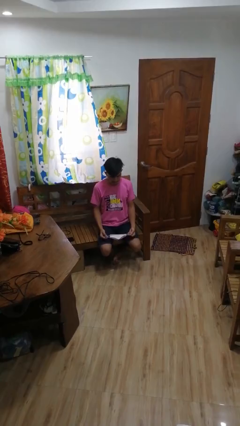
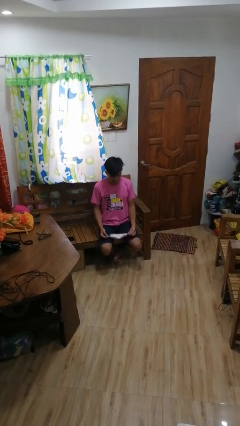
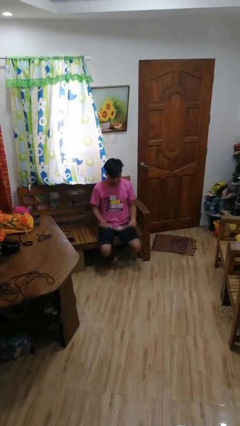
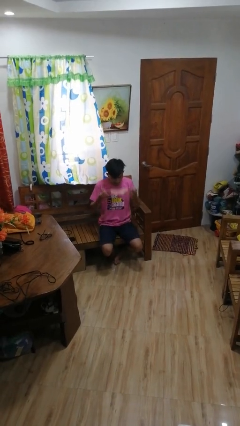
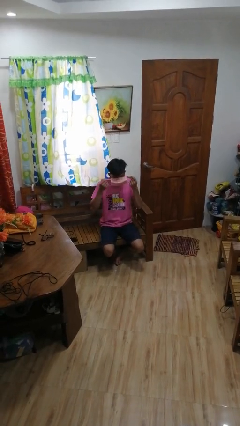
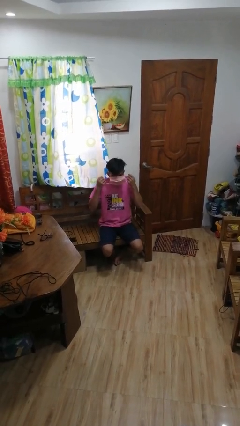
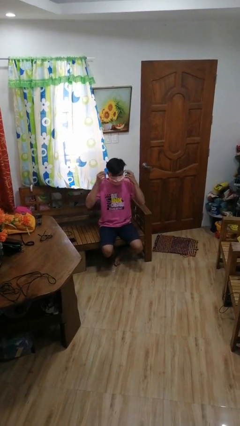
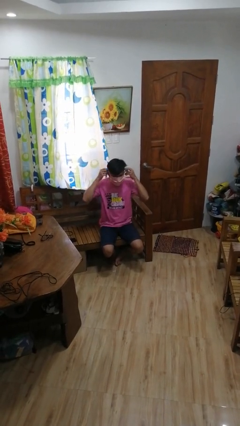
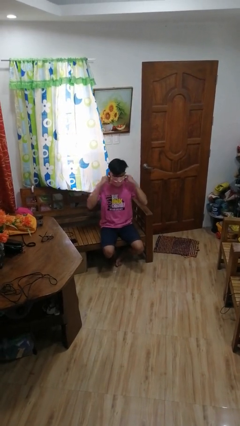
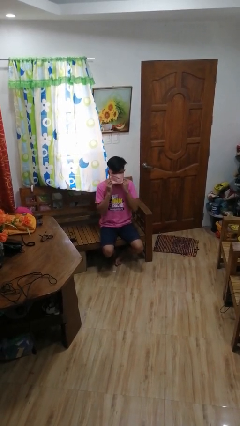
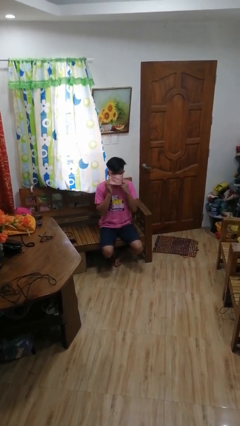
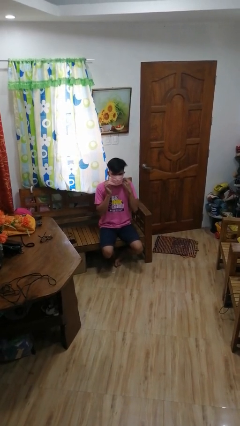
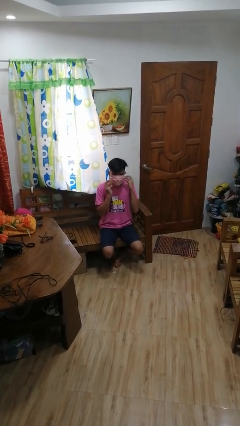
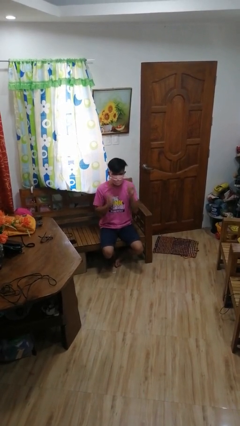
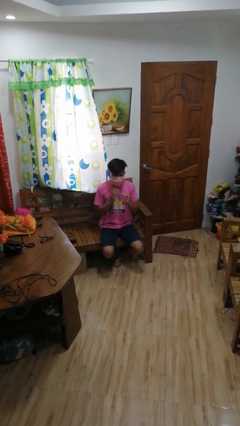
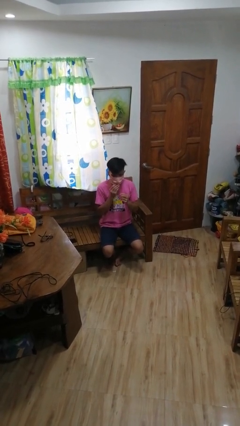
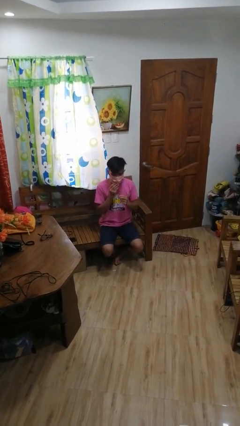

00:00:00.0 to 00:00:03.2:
person puts on facemask

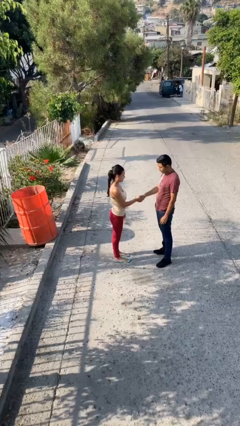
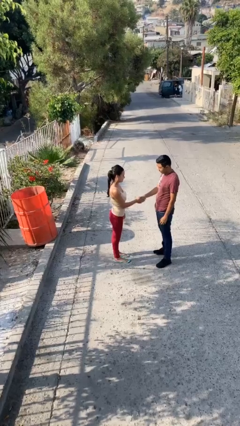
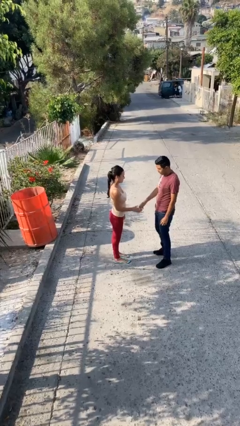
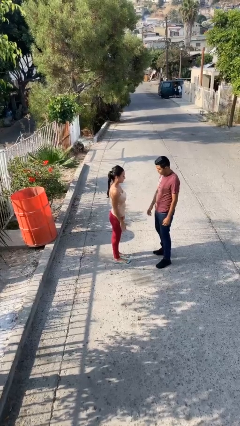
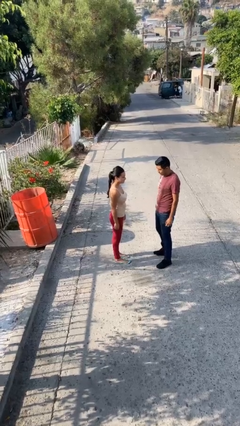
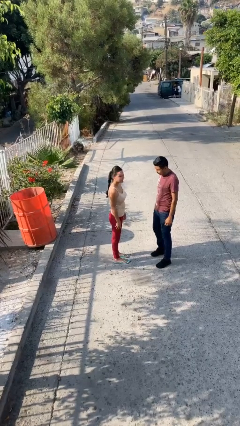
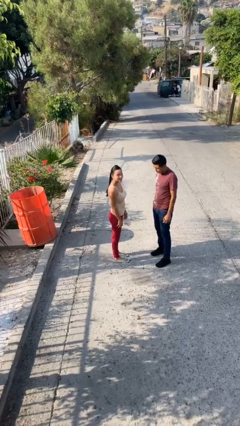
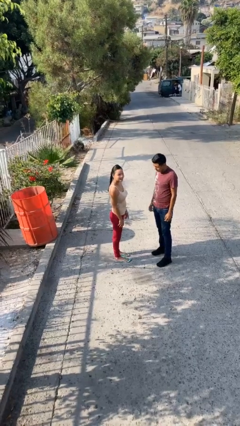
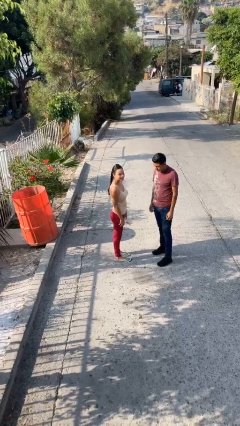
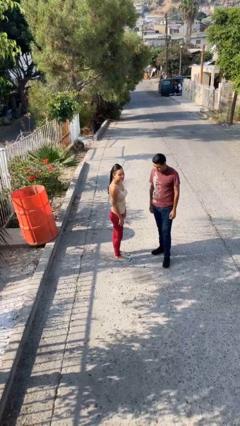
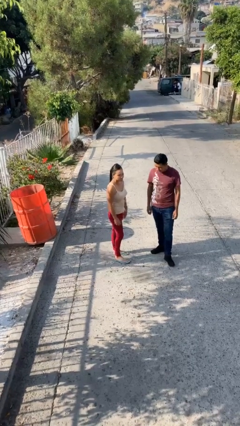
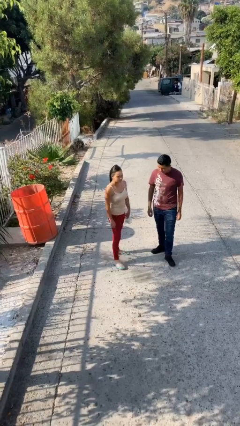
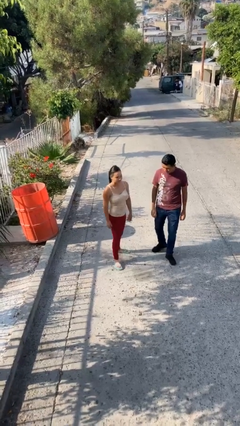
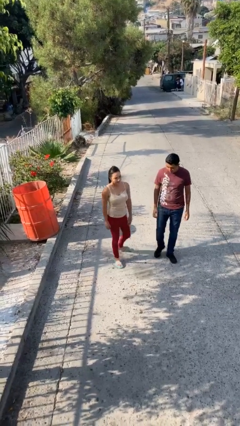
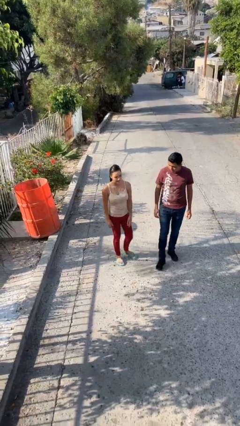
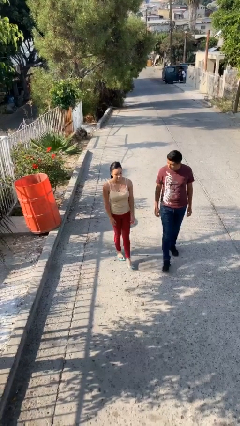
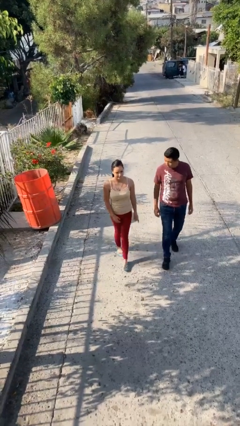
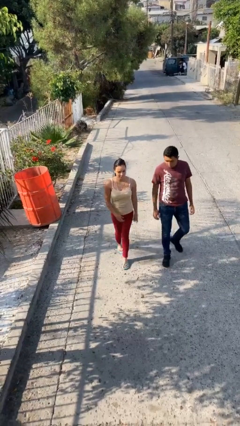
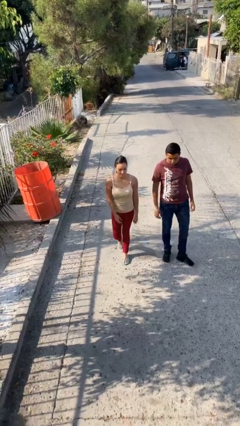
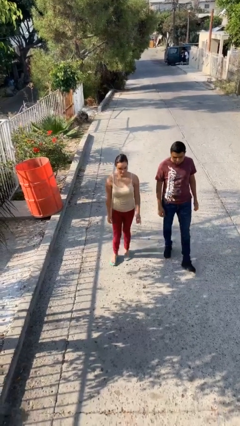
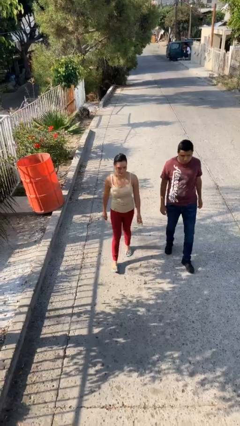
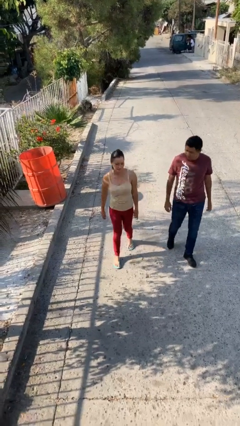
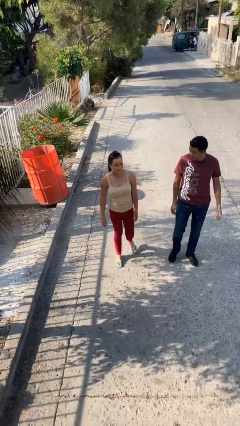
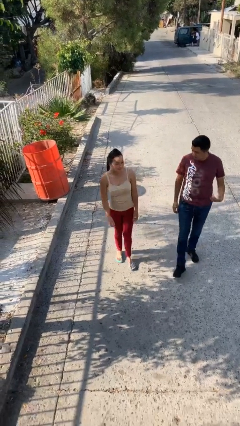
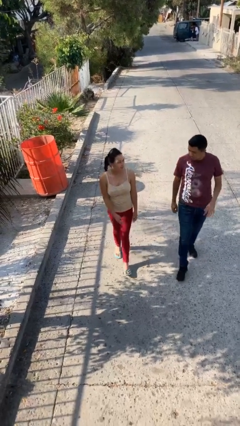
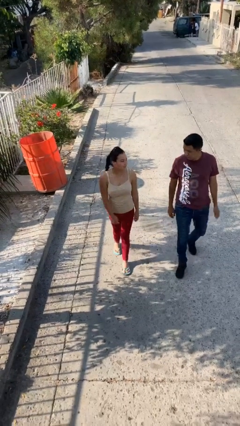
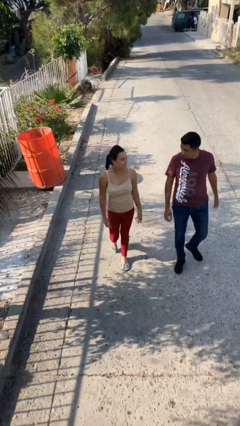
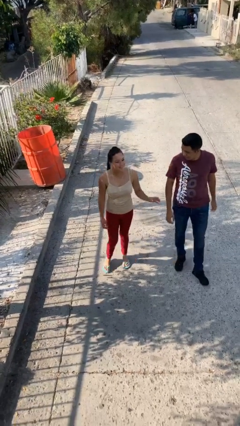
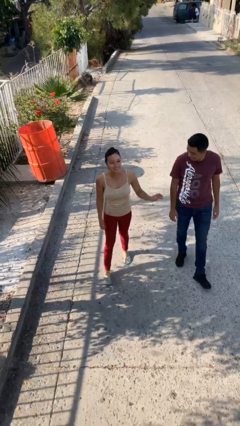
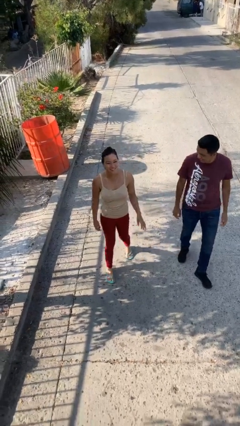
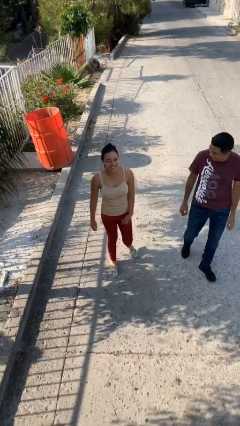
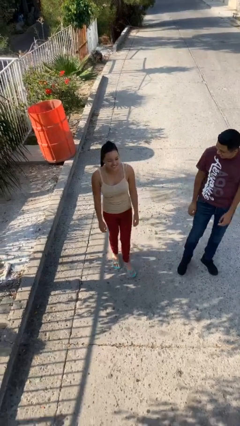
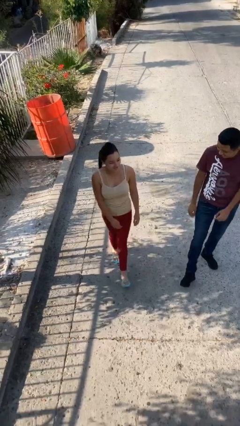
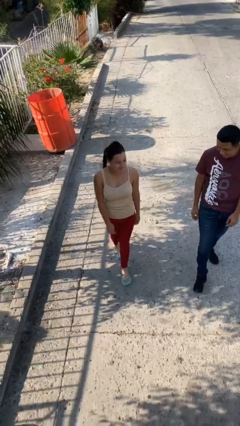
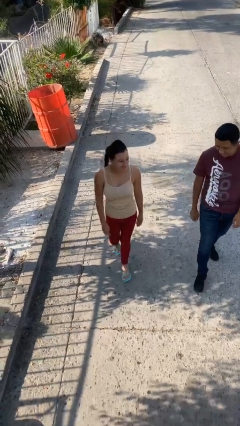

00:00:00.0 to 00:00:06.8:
person talks to person

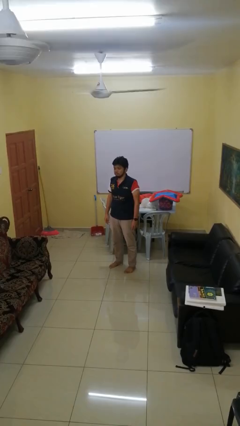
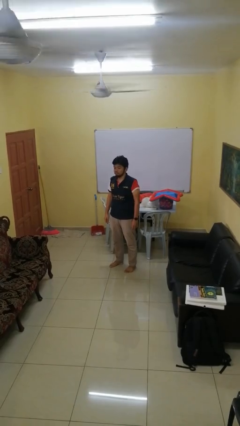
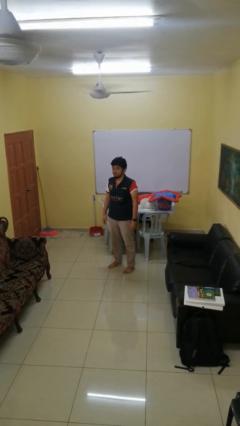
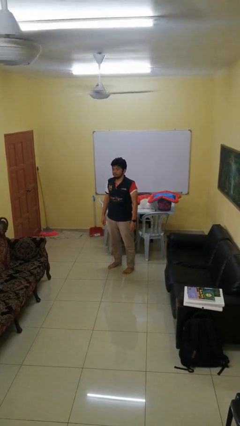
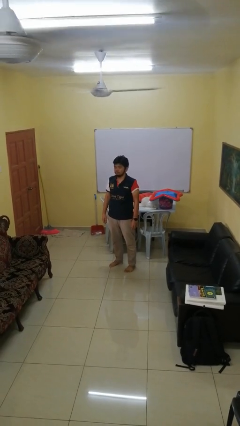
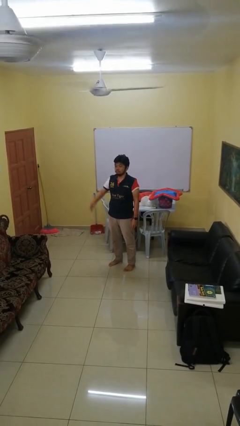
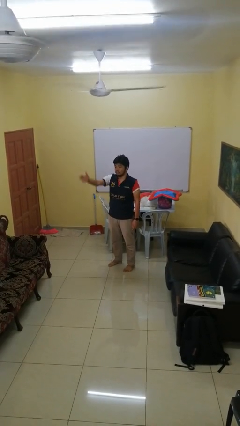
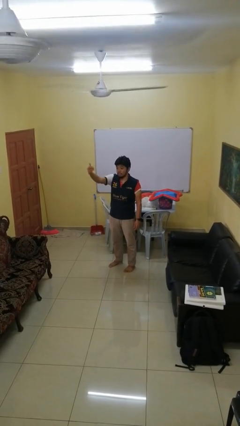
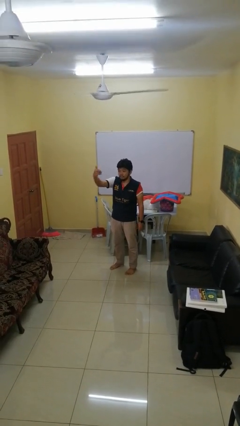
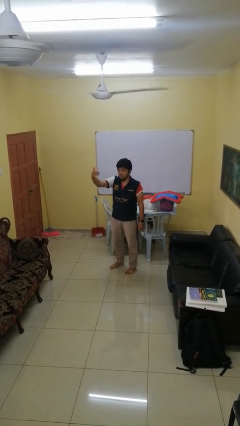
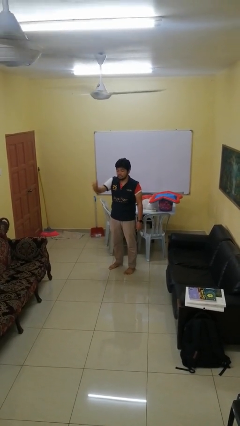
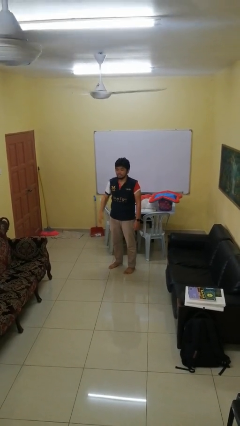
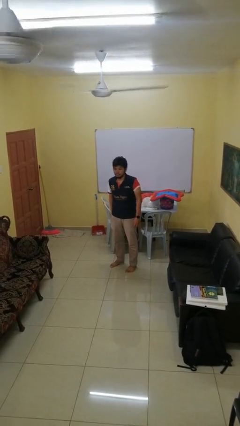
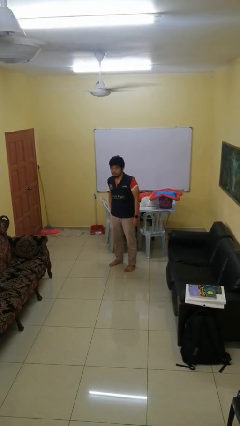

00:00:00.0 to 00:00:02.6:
person gestures come here

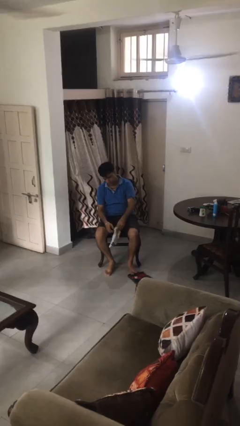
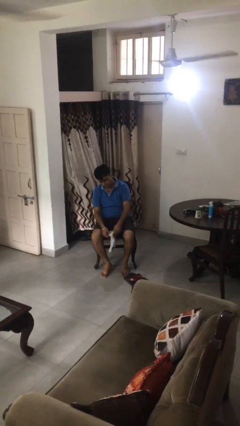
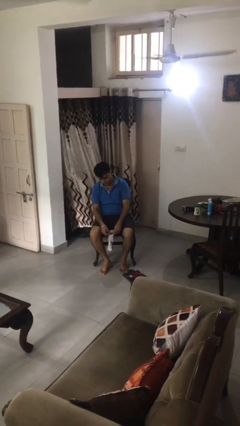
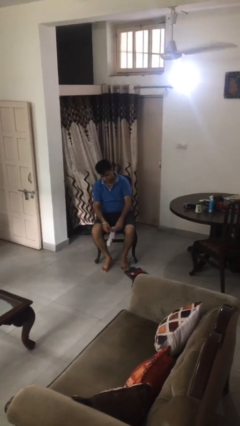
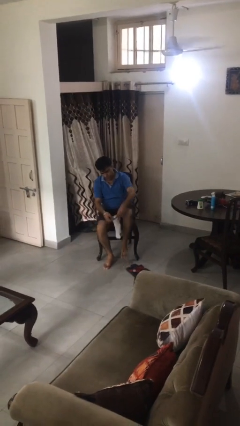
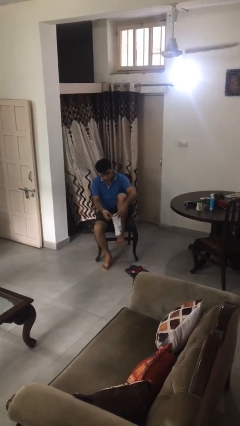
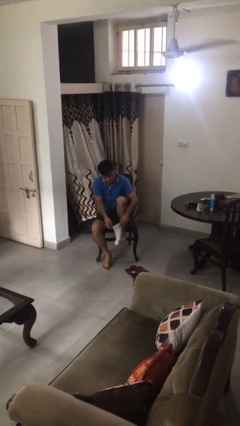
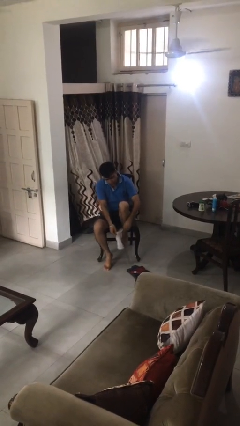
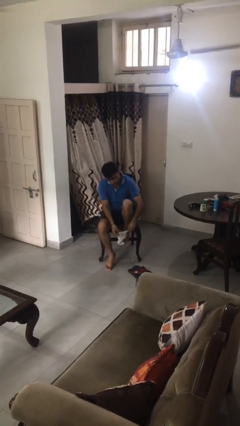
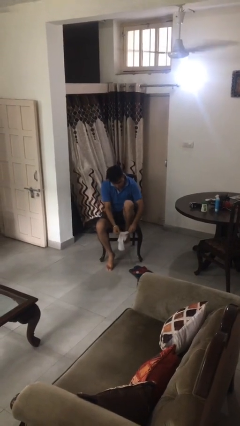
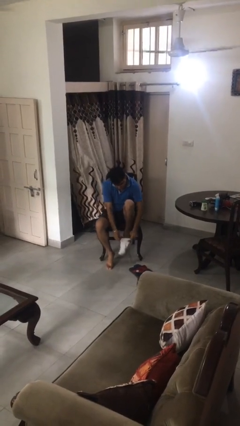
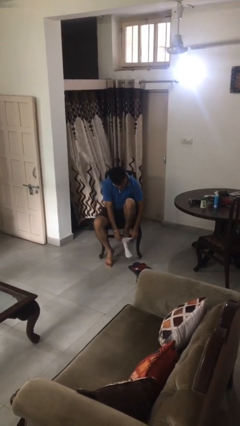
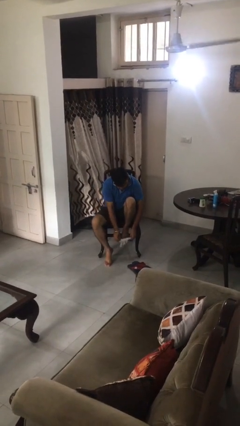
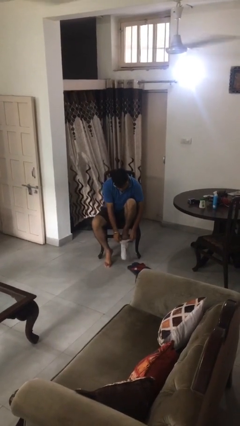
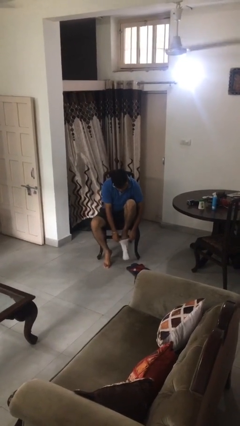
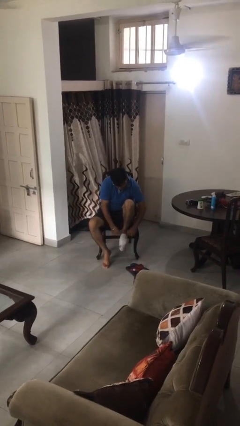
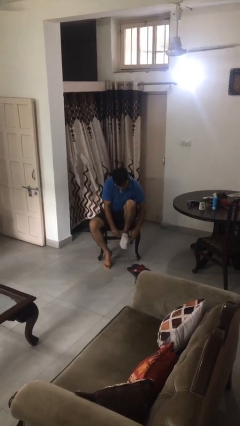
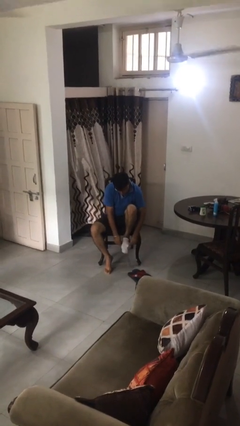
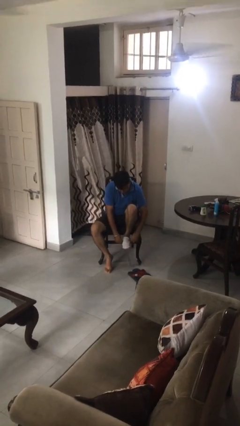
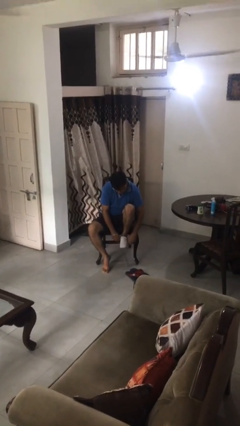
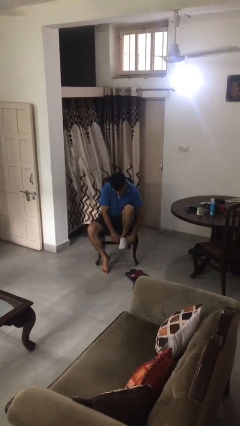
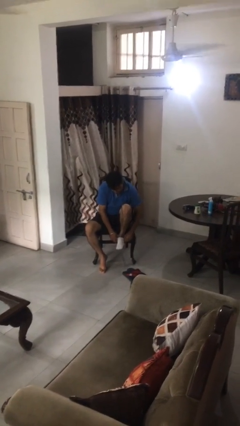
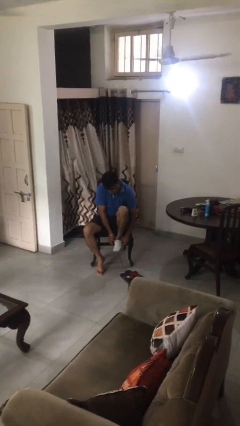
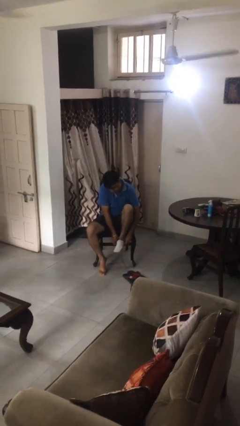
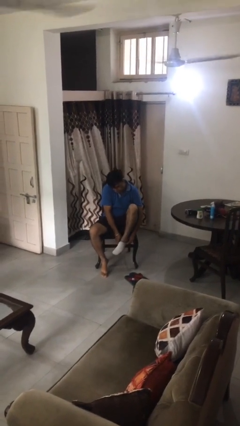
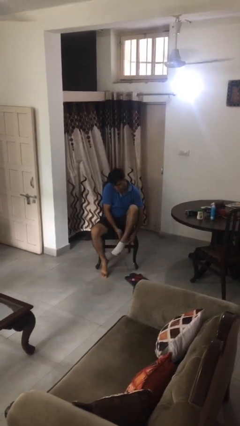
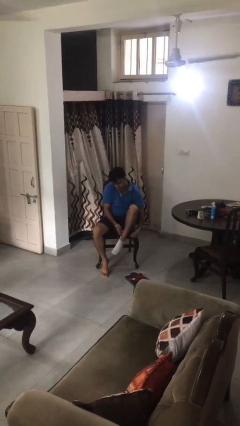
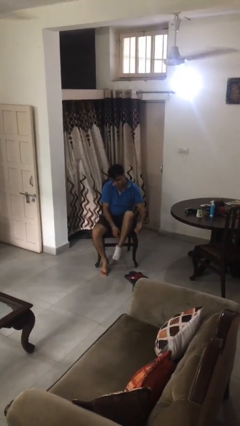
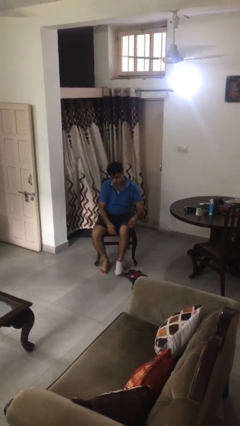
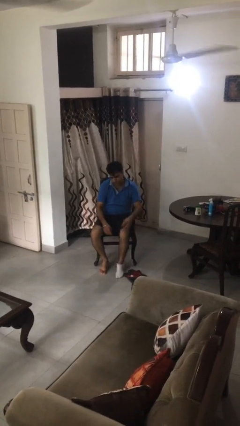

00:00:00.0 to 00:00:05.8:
person puts on socks
